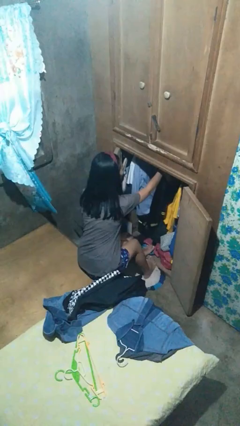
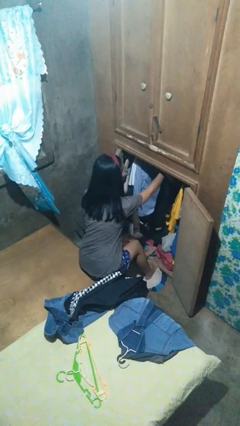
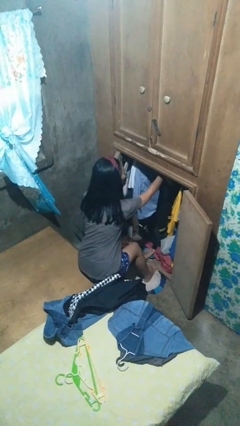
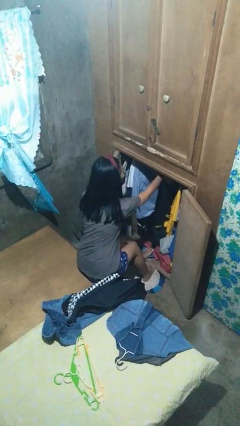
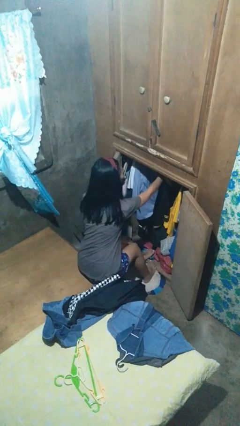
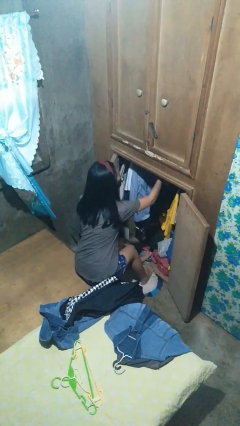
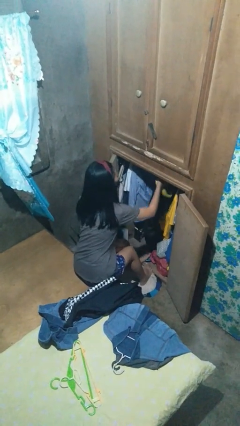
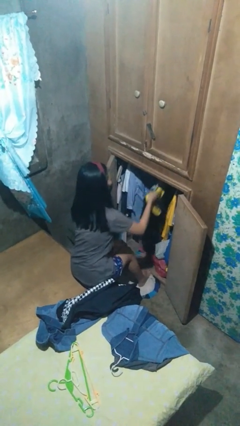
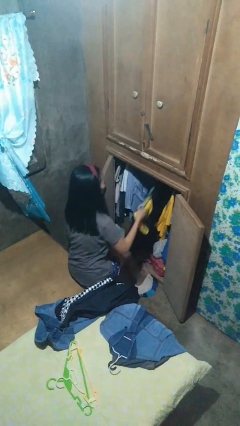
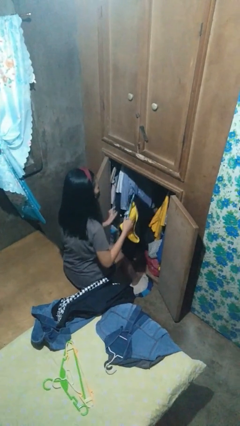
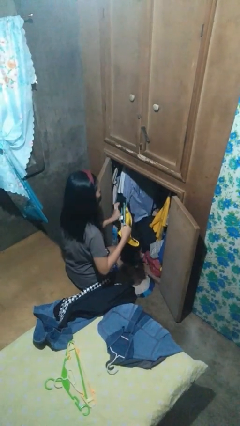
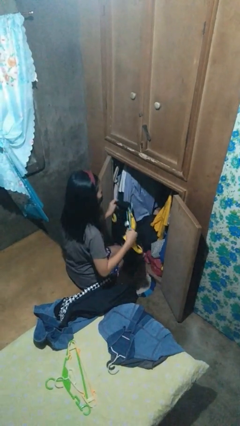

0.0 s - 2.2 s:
person takes clothes from closet

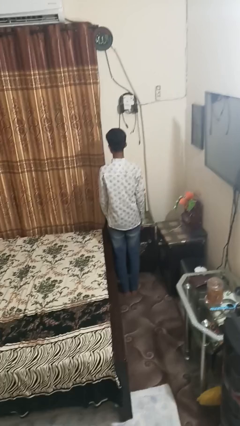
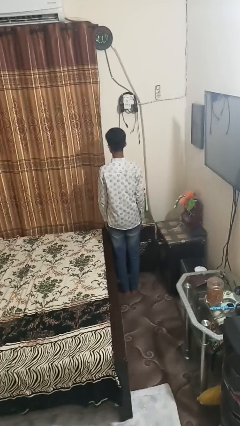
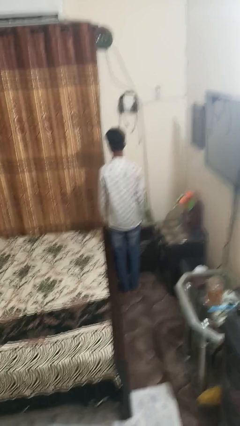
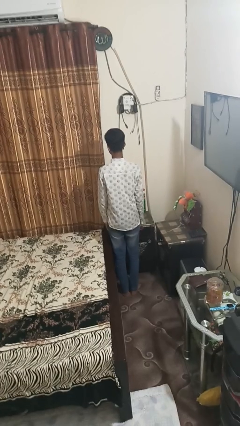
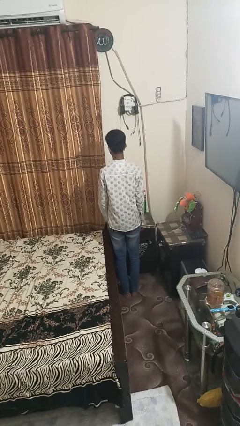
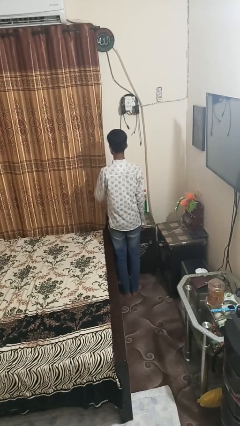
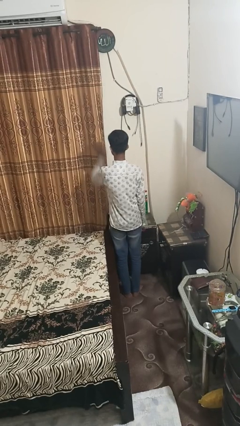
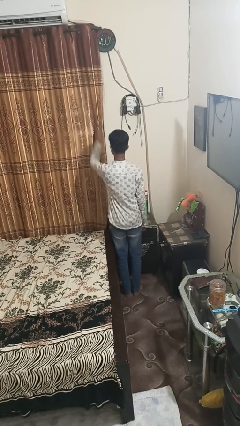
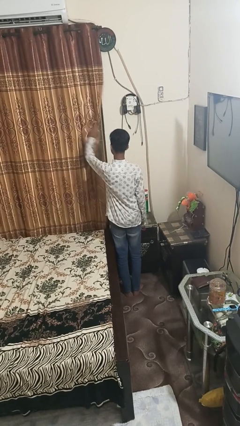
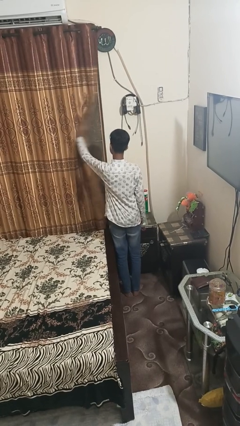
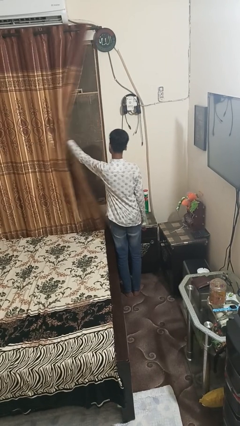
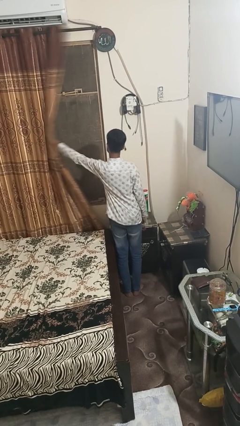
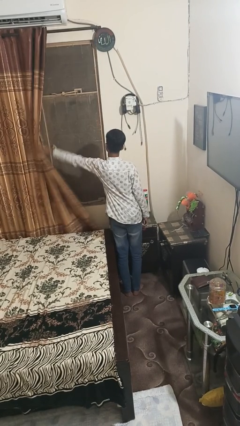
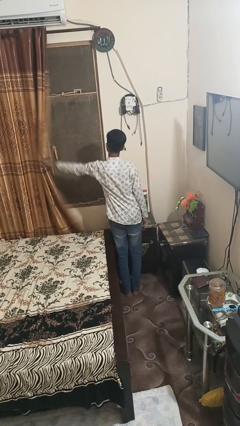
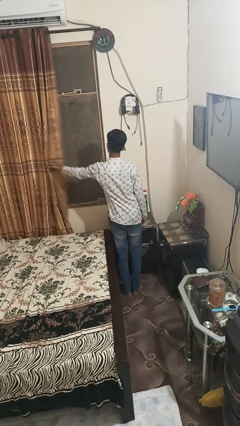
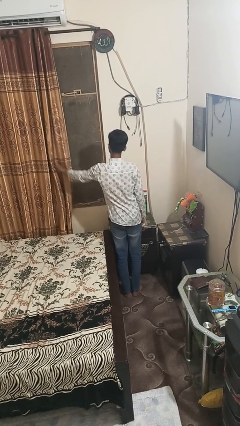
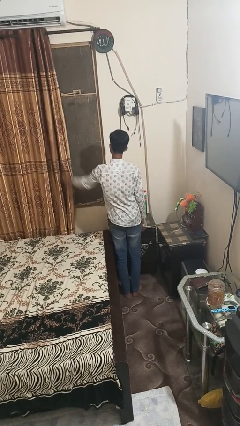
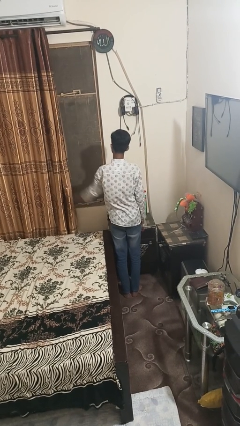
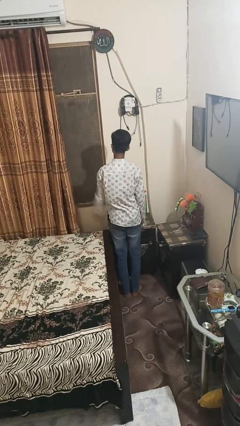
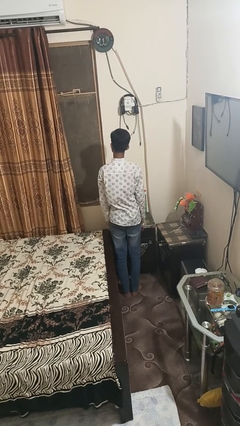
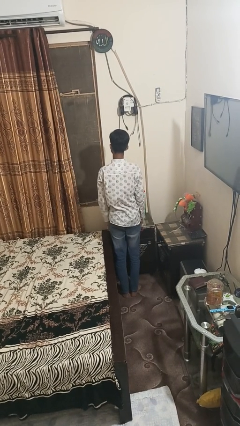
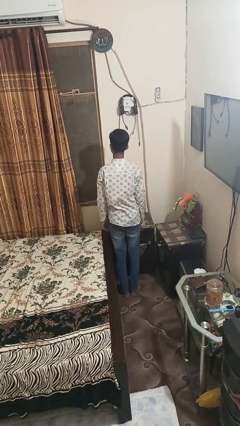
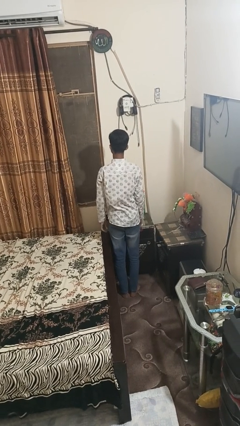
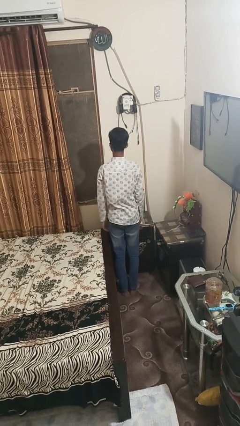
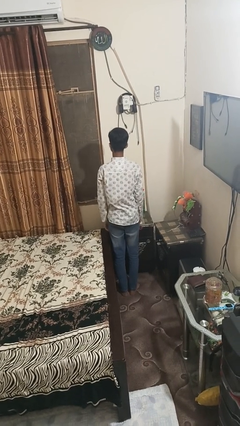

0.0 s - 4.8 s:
person opens curtains

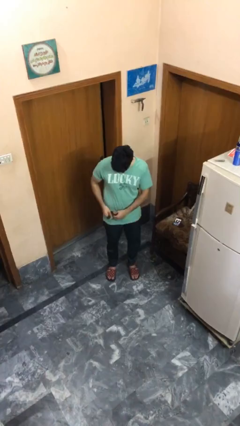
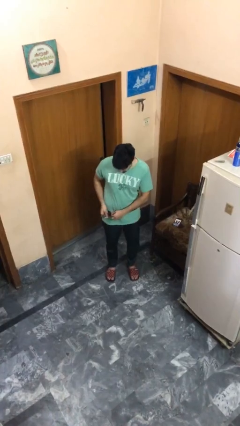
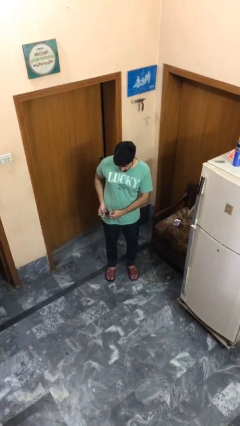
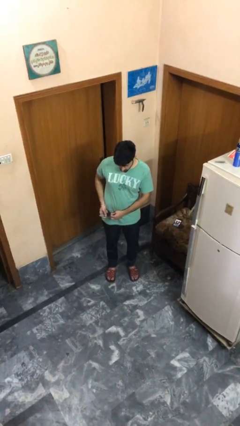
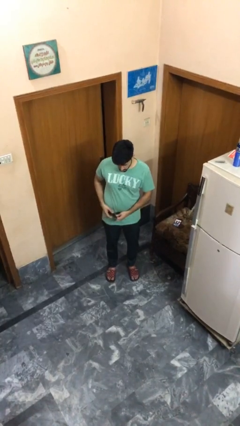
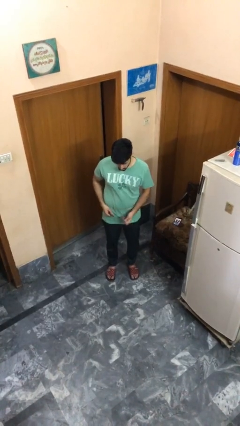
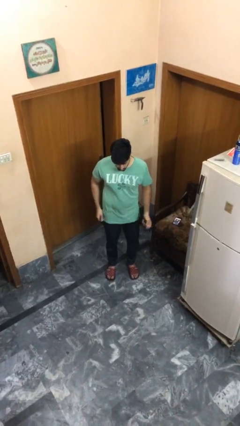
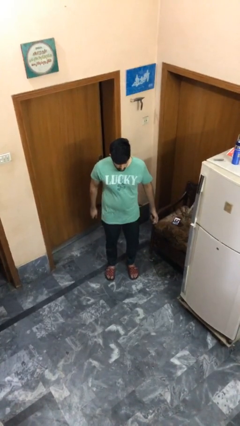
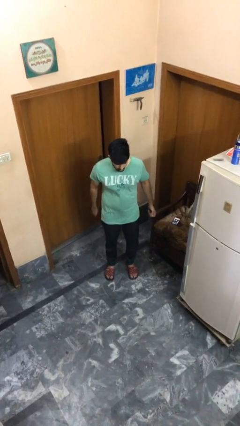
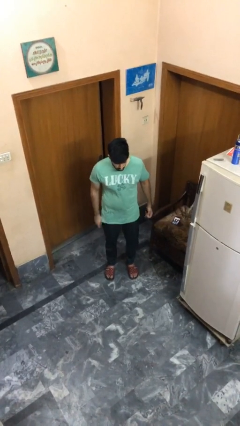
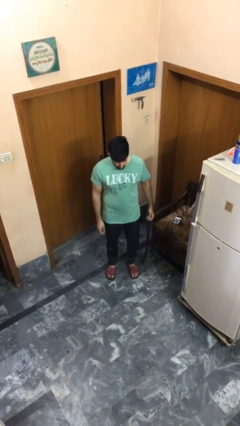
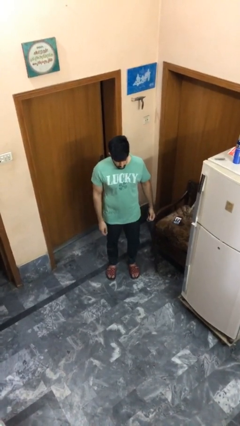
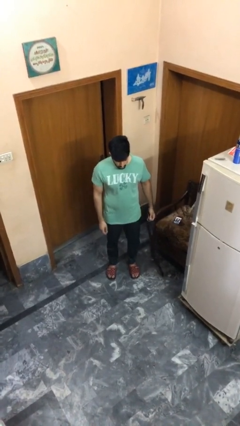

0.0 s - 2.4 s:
person takes off belt

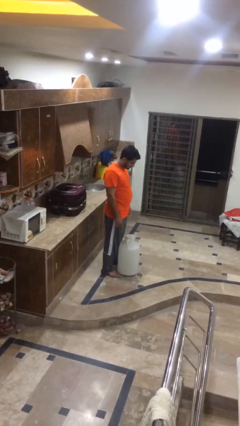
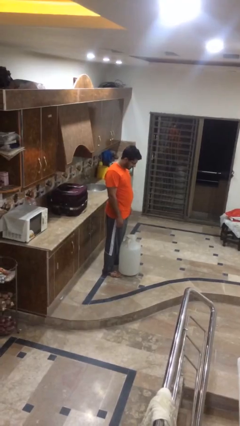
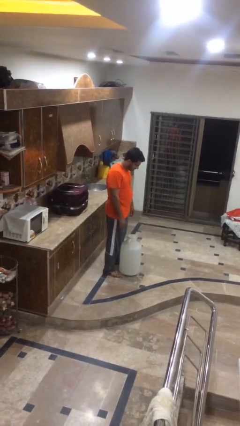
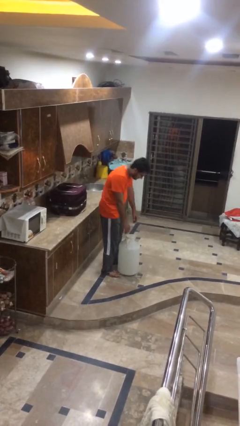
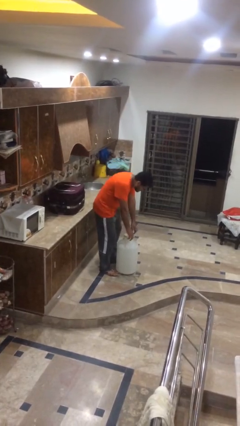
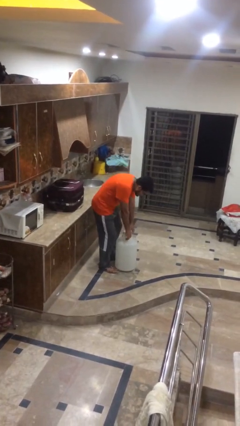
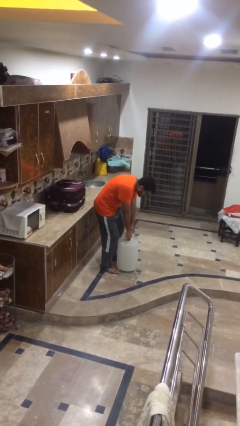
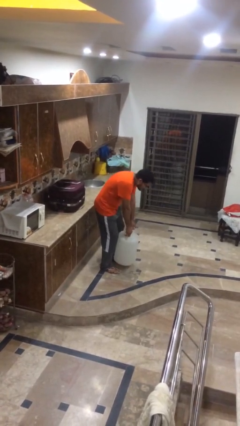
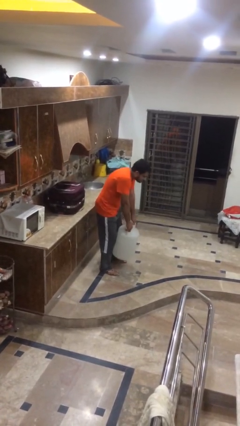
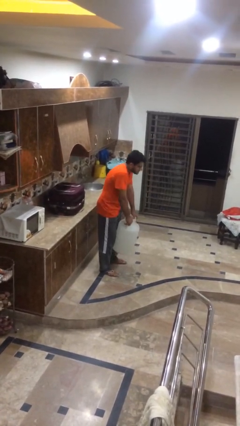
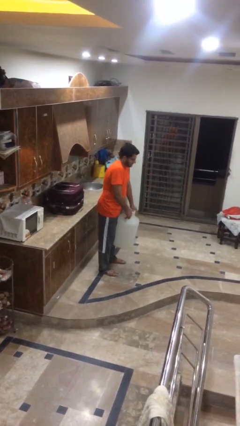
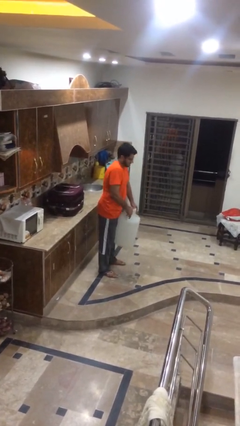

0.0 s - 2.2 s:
person picks up object from floor

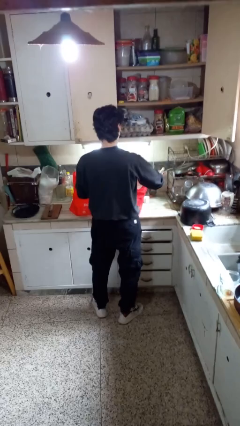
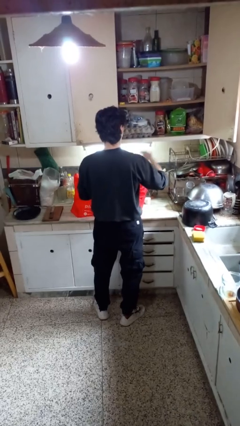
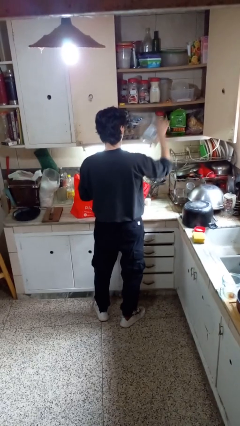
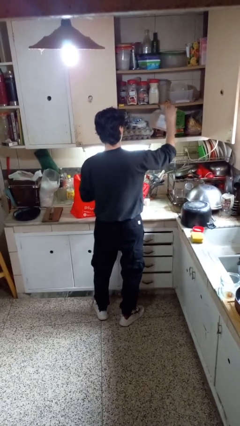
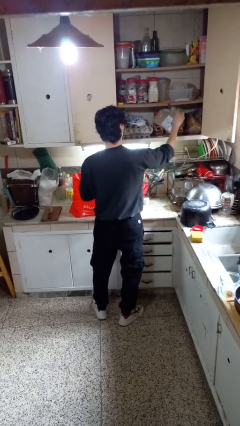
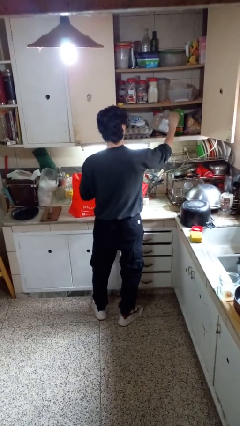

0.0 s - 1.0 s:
person loads groceries into cabinet

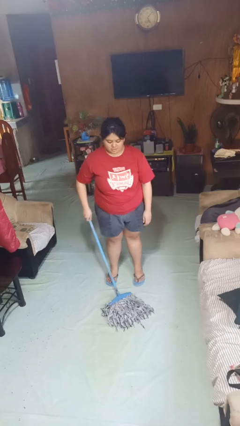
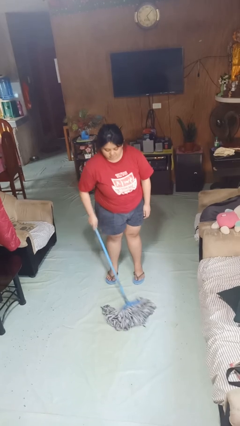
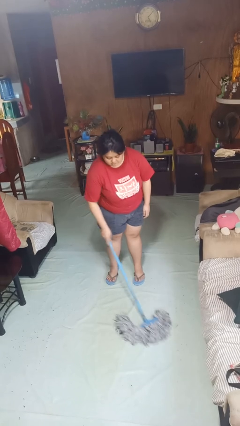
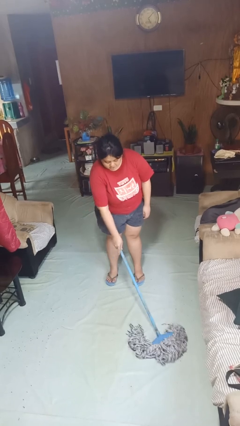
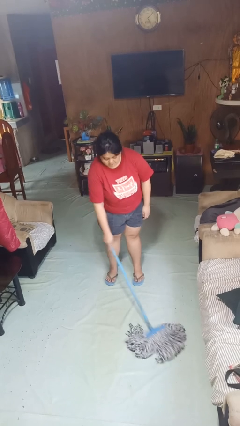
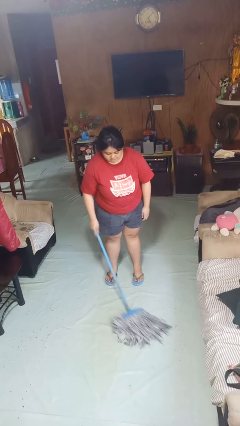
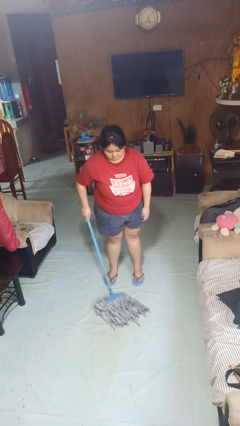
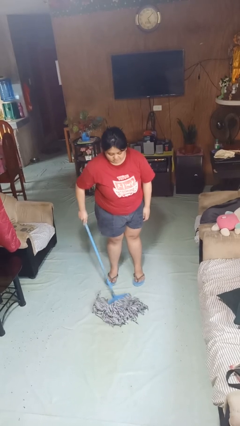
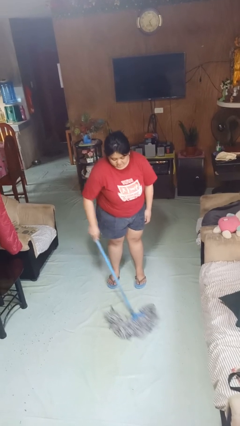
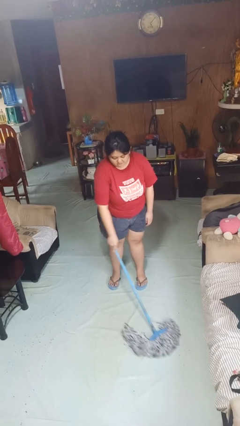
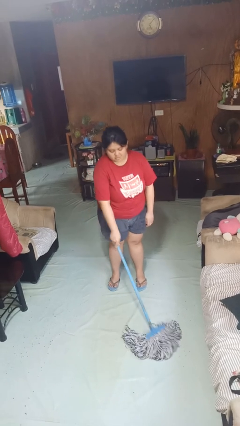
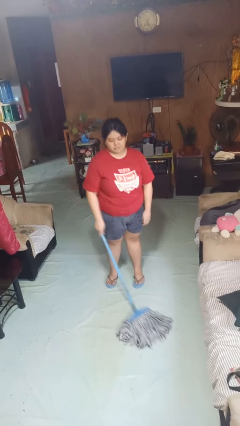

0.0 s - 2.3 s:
person mops

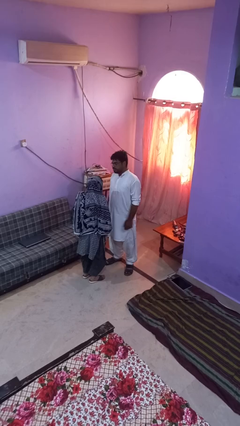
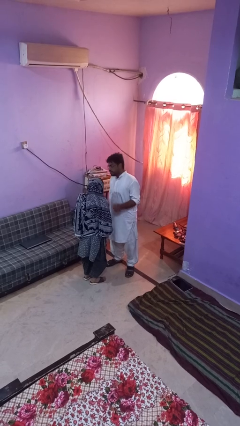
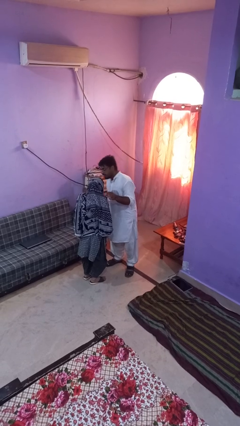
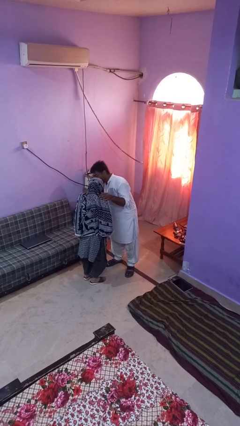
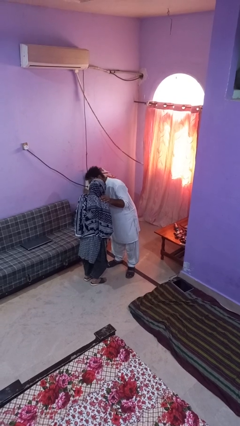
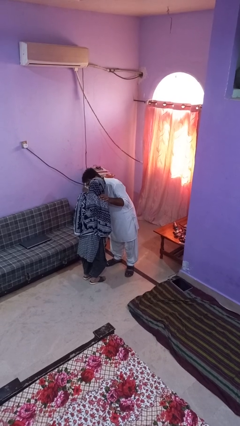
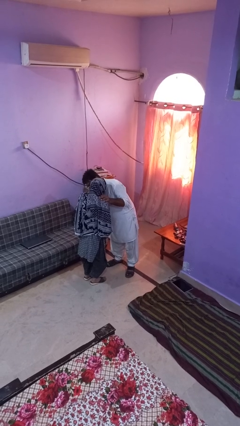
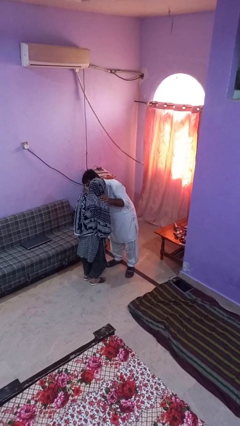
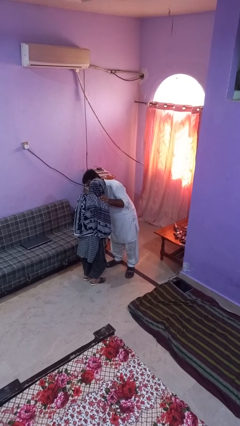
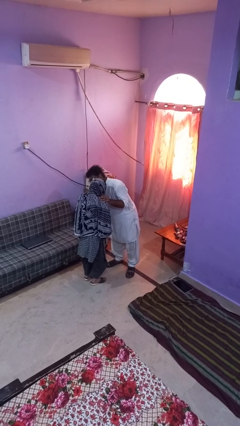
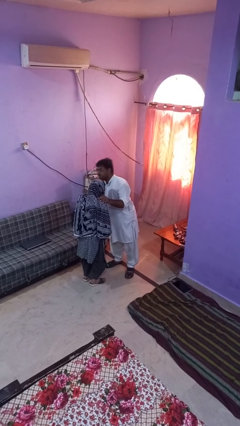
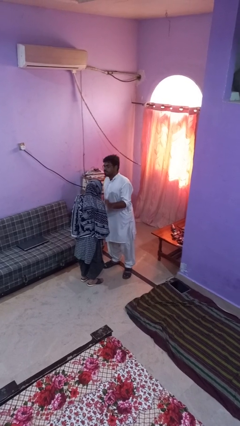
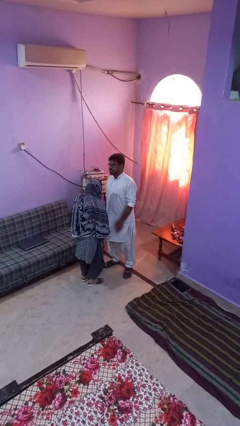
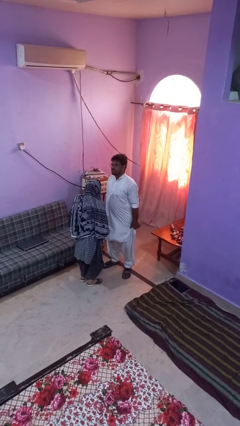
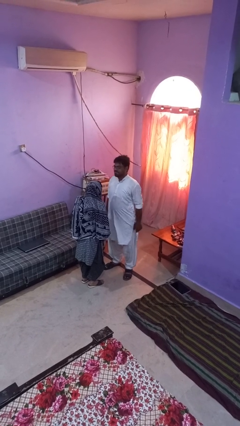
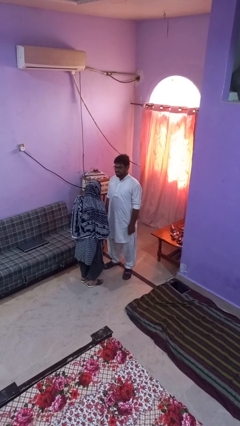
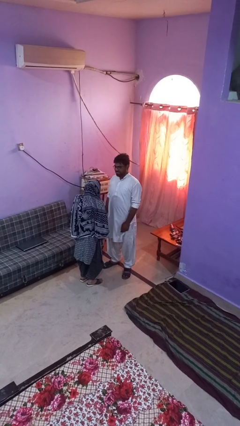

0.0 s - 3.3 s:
person kisses cheek of person
